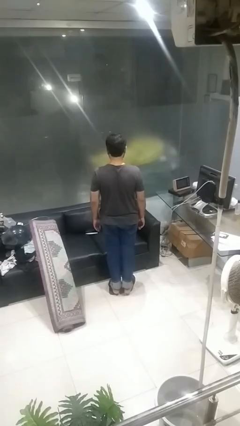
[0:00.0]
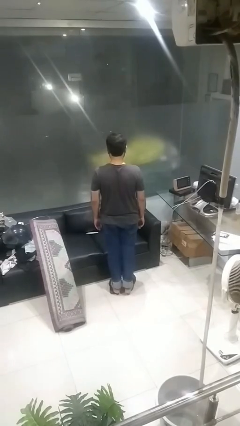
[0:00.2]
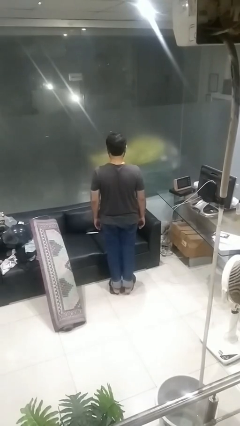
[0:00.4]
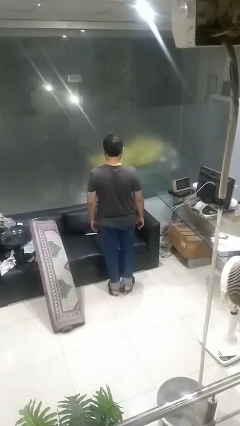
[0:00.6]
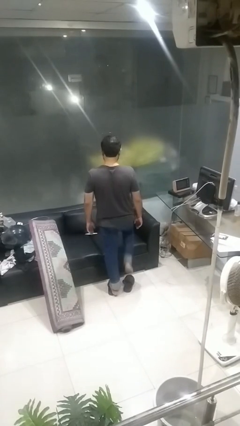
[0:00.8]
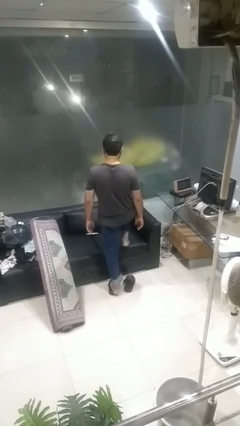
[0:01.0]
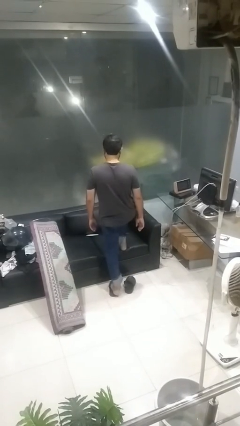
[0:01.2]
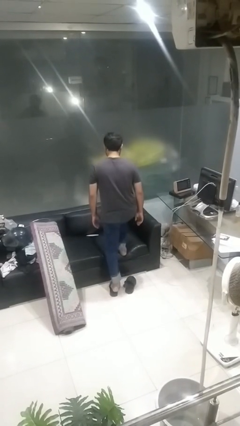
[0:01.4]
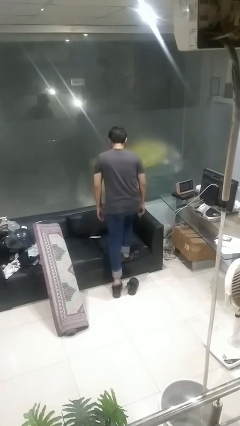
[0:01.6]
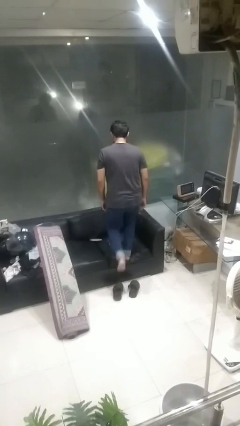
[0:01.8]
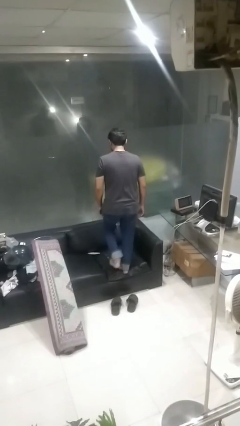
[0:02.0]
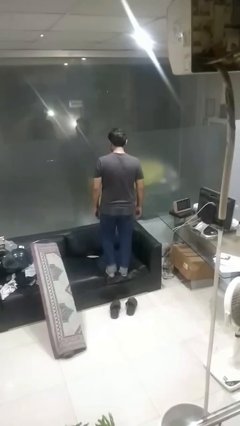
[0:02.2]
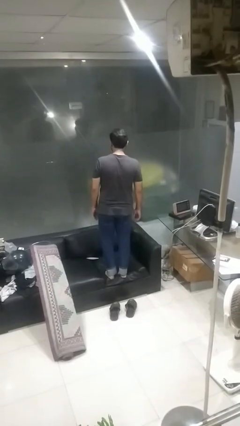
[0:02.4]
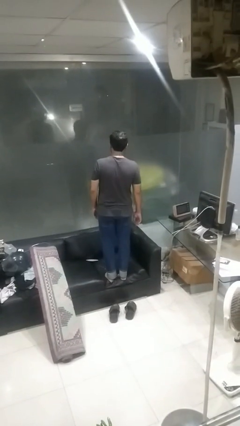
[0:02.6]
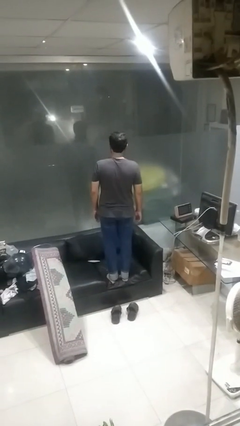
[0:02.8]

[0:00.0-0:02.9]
person climbs on couch

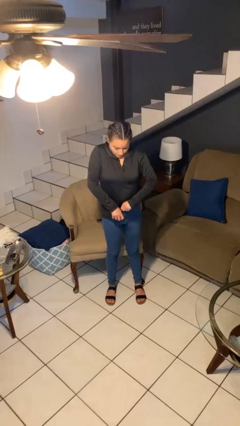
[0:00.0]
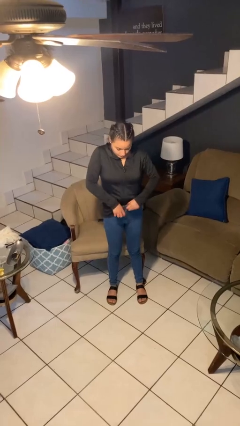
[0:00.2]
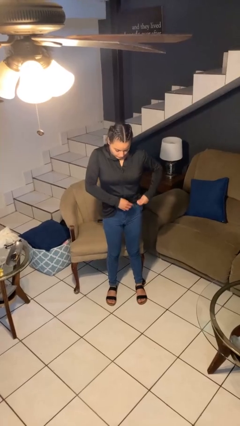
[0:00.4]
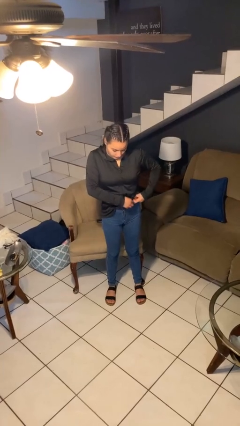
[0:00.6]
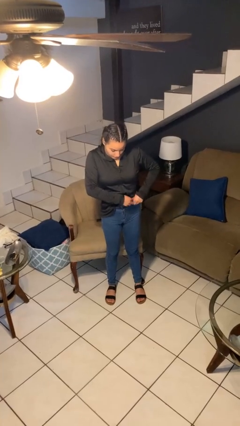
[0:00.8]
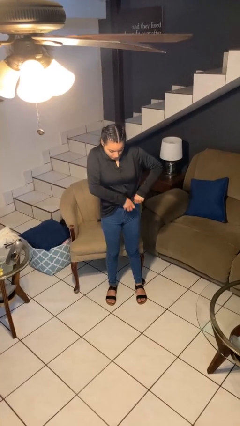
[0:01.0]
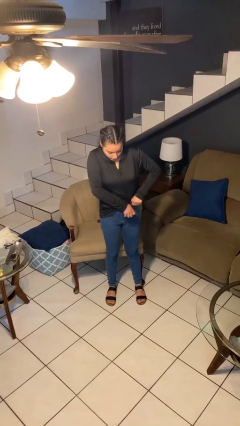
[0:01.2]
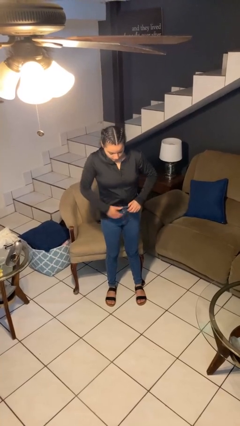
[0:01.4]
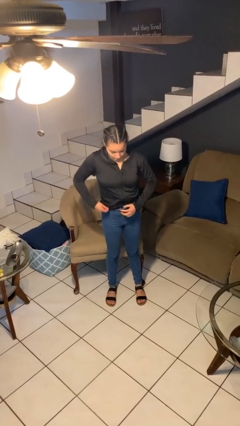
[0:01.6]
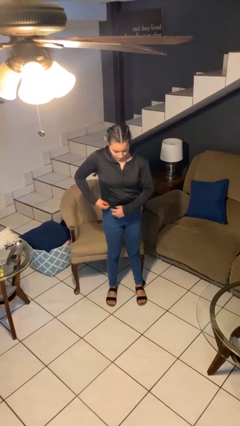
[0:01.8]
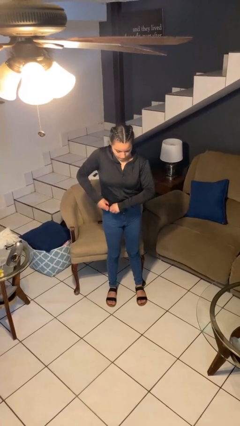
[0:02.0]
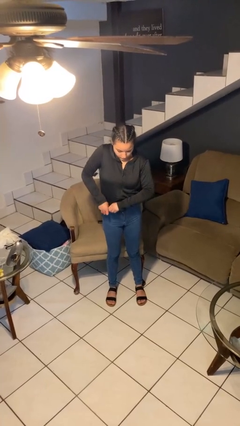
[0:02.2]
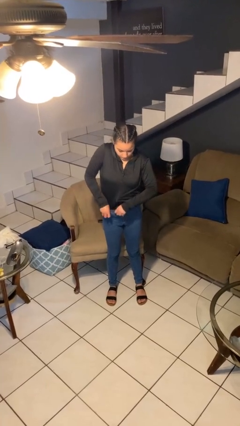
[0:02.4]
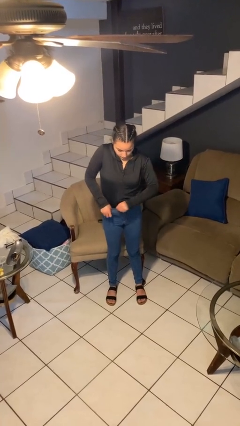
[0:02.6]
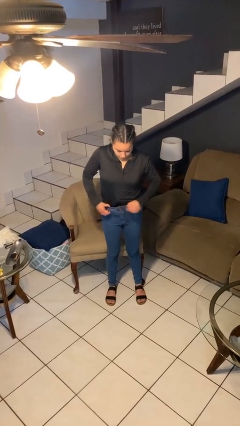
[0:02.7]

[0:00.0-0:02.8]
person tucks in shirt

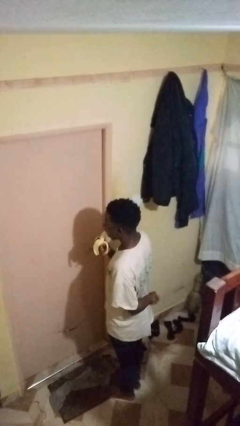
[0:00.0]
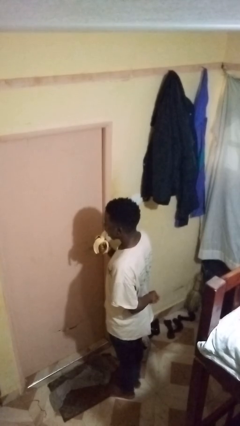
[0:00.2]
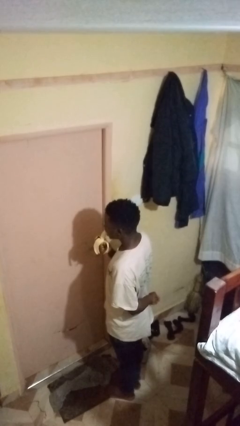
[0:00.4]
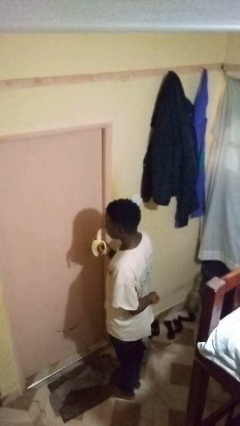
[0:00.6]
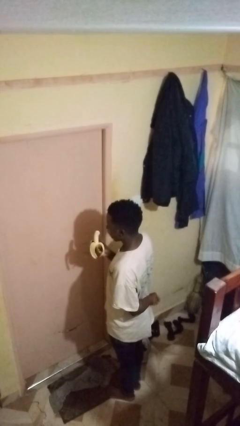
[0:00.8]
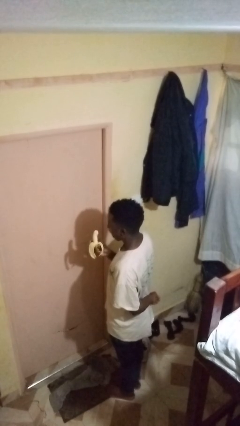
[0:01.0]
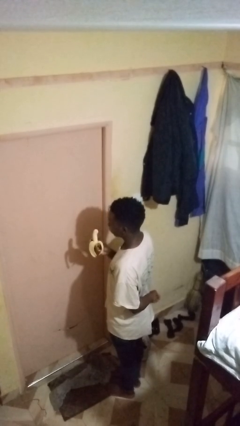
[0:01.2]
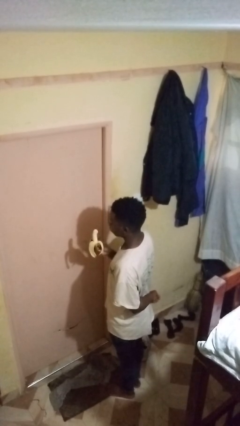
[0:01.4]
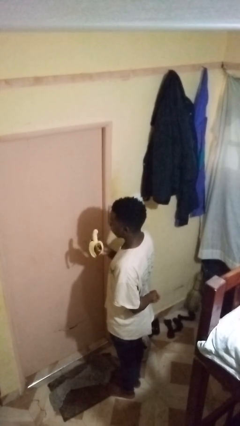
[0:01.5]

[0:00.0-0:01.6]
person eats banana

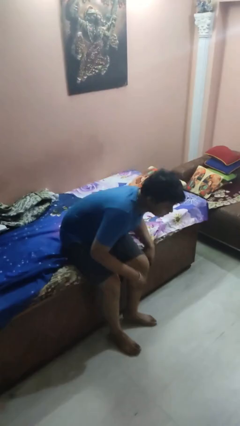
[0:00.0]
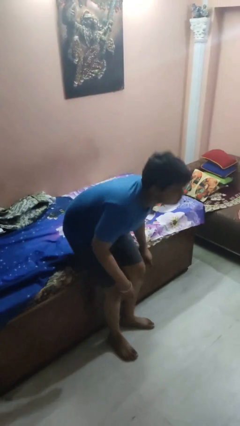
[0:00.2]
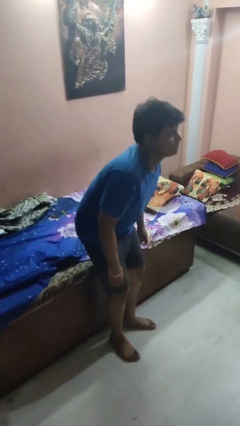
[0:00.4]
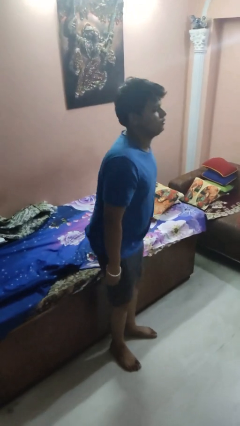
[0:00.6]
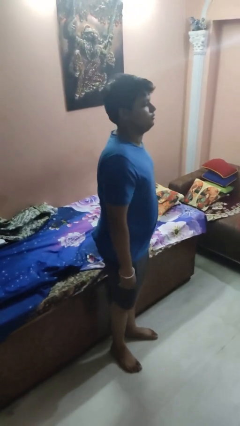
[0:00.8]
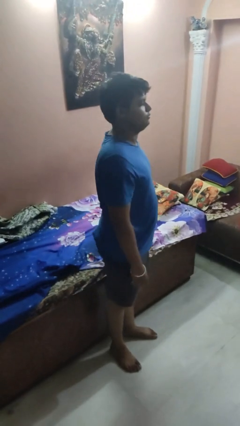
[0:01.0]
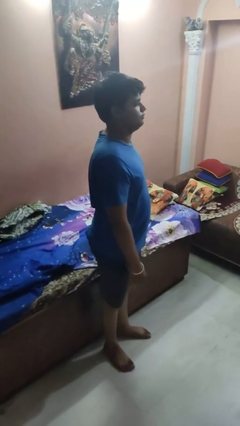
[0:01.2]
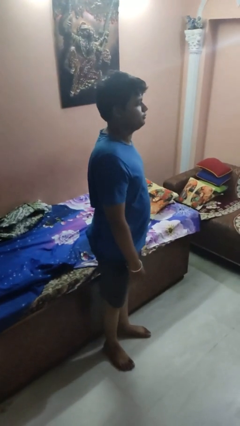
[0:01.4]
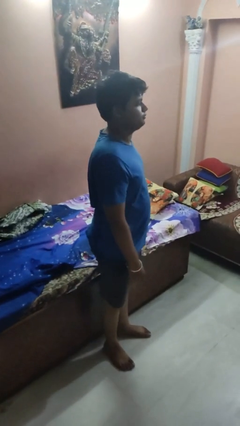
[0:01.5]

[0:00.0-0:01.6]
person stands up

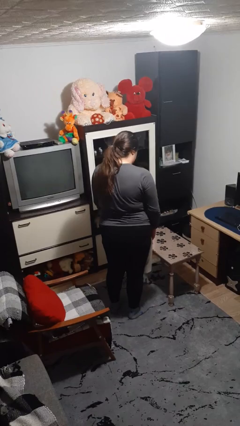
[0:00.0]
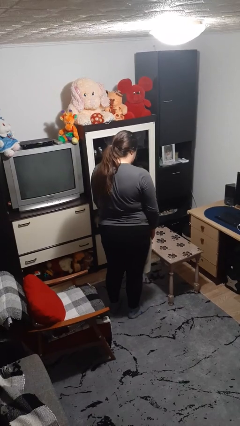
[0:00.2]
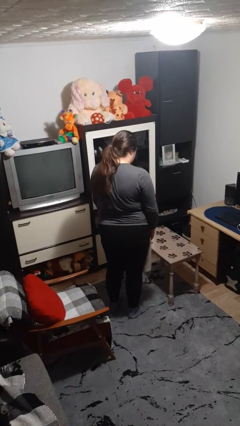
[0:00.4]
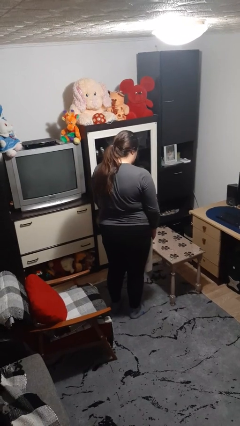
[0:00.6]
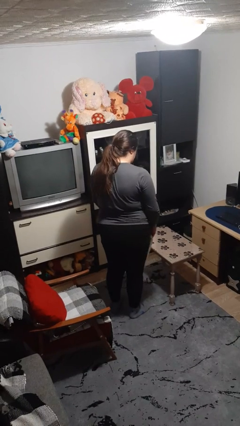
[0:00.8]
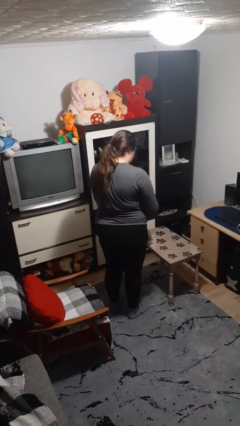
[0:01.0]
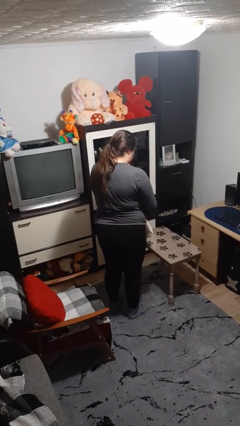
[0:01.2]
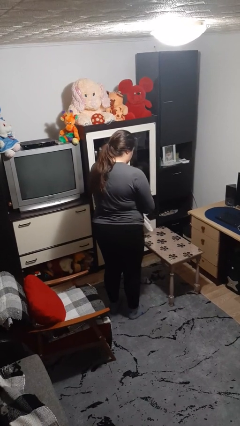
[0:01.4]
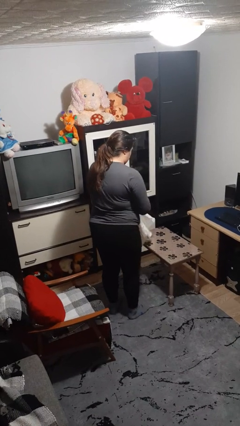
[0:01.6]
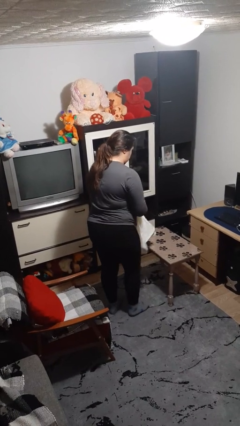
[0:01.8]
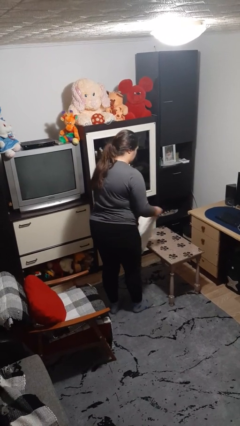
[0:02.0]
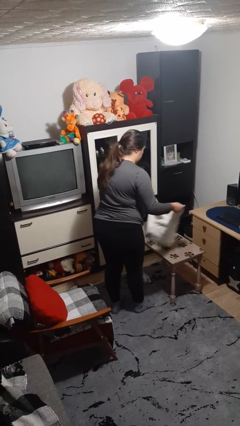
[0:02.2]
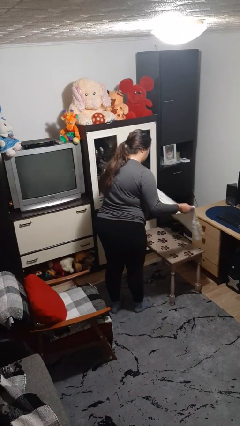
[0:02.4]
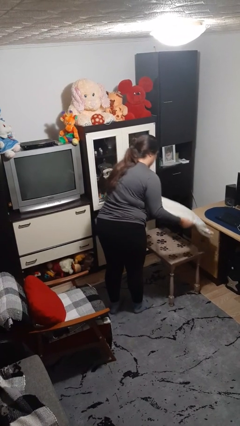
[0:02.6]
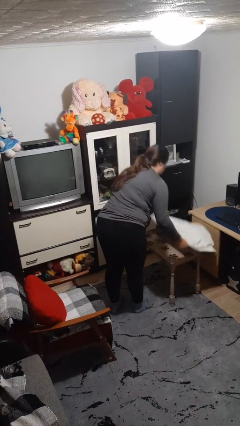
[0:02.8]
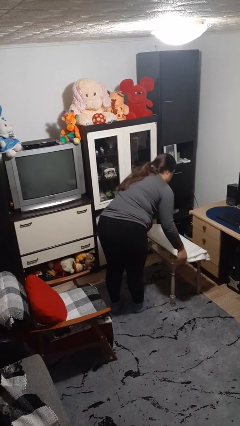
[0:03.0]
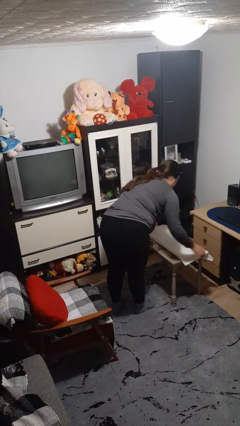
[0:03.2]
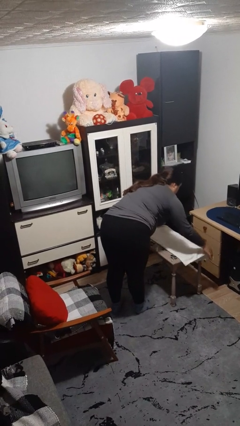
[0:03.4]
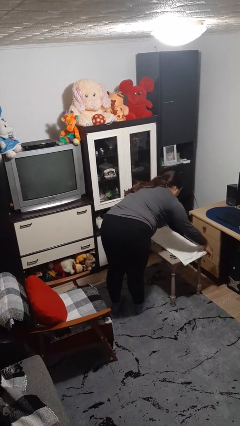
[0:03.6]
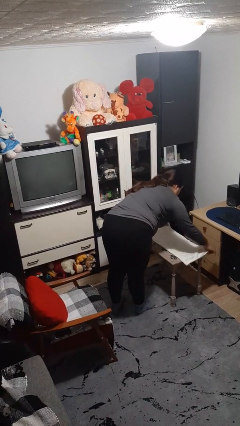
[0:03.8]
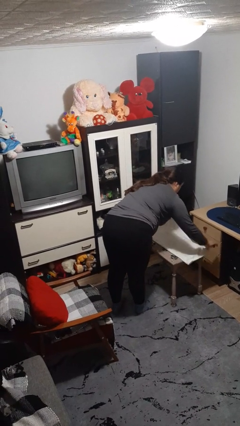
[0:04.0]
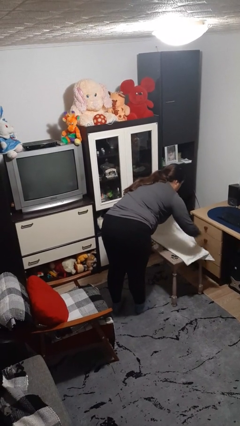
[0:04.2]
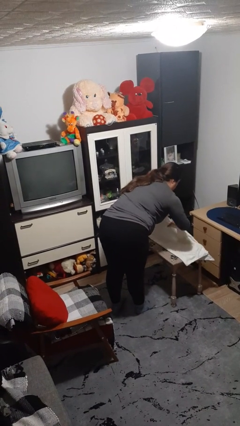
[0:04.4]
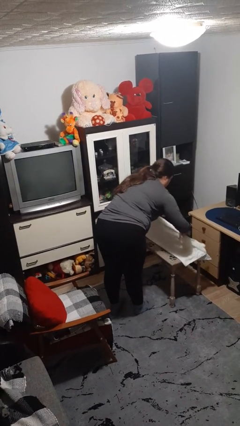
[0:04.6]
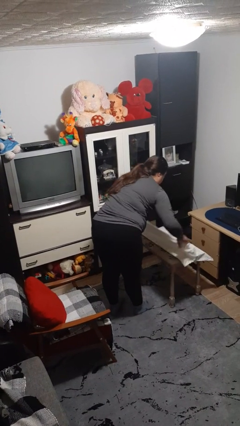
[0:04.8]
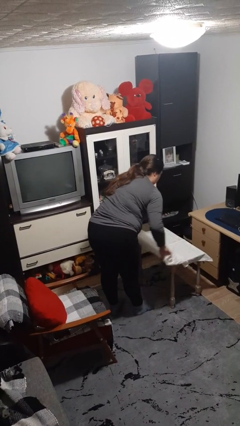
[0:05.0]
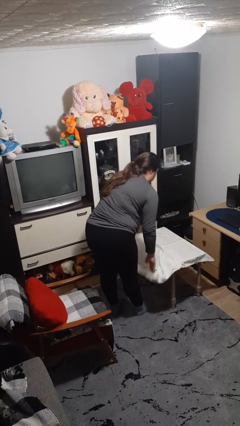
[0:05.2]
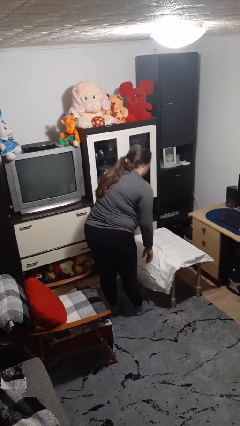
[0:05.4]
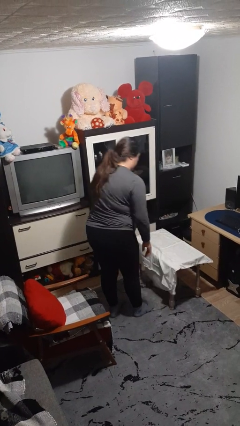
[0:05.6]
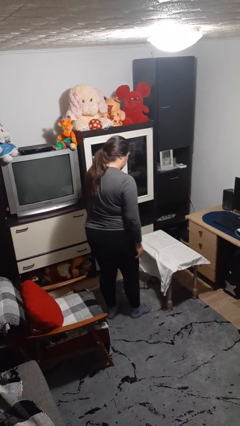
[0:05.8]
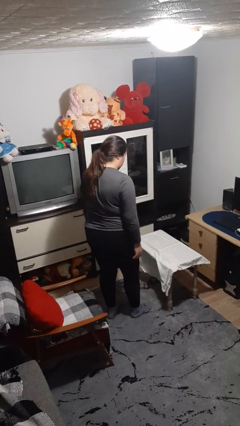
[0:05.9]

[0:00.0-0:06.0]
person spreads tablecloth

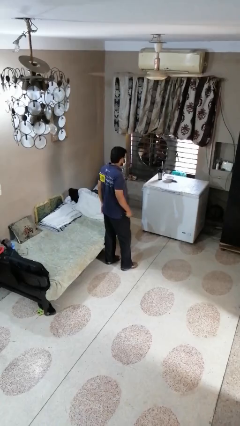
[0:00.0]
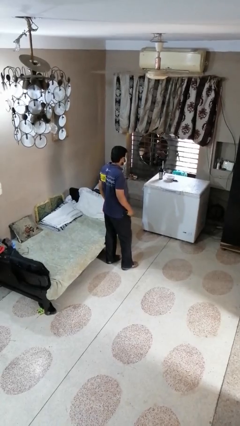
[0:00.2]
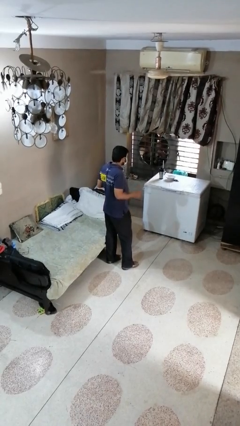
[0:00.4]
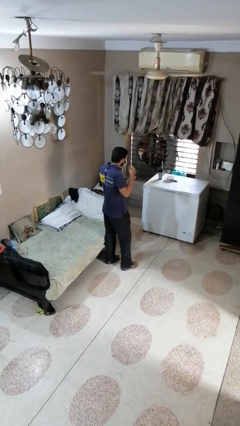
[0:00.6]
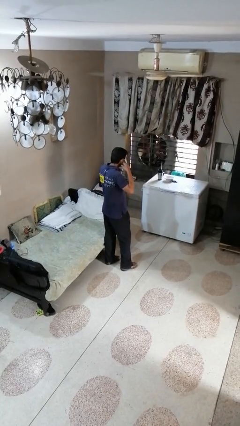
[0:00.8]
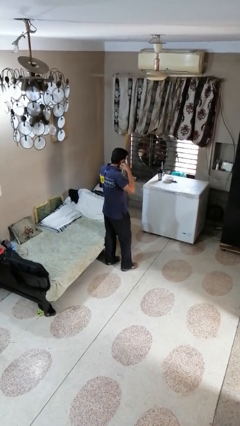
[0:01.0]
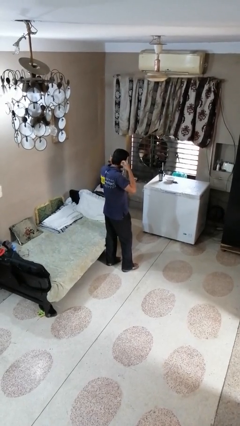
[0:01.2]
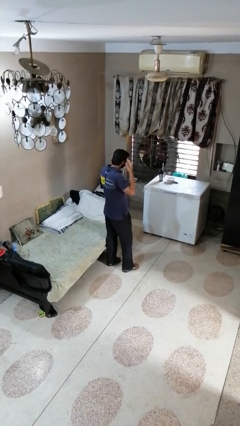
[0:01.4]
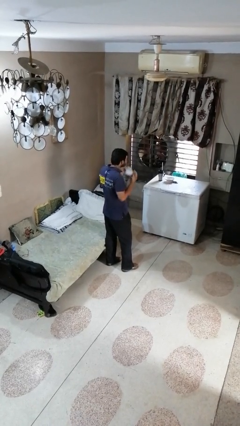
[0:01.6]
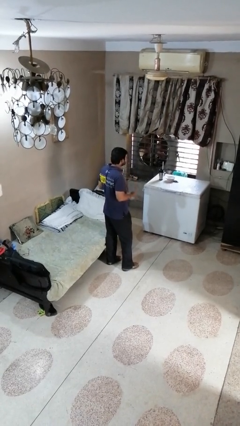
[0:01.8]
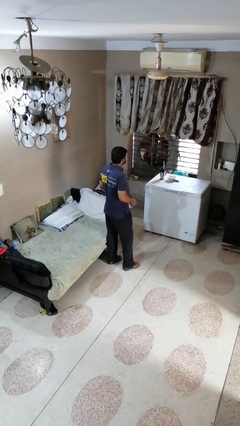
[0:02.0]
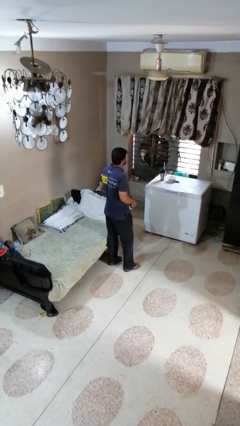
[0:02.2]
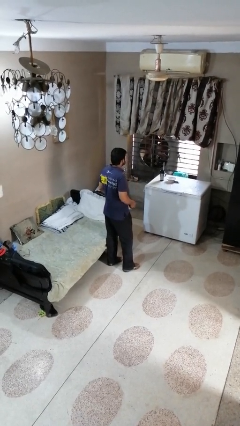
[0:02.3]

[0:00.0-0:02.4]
person takes off facemask
